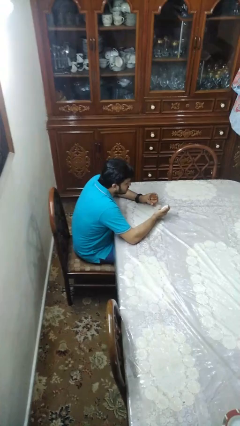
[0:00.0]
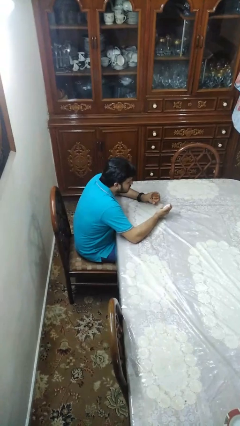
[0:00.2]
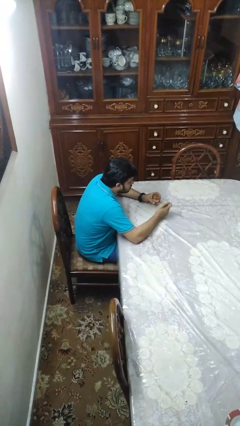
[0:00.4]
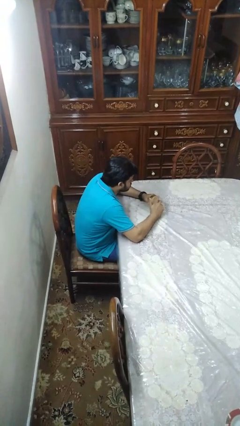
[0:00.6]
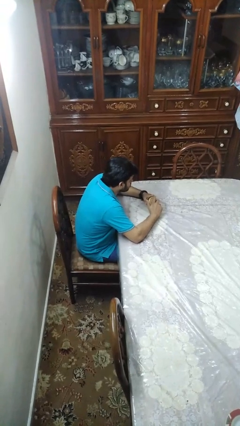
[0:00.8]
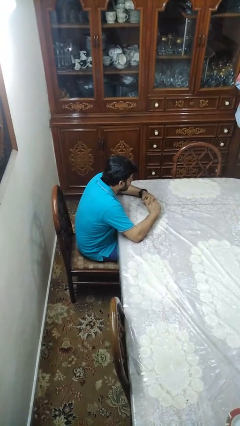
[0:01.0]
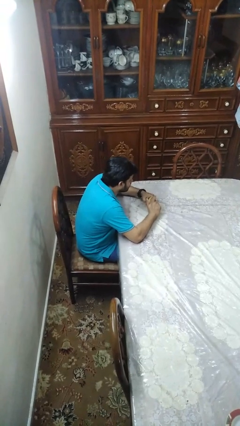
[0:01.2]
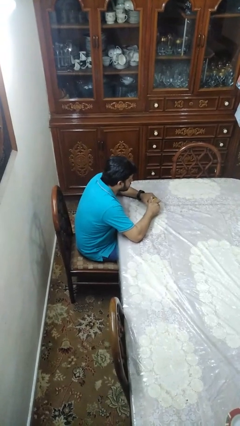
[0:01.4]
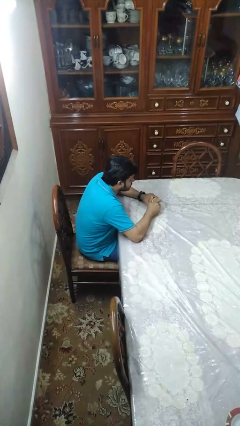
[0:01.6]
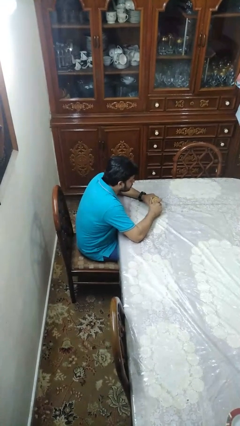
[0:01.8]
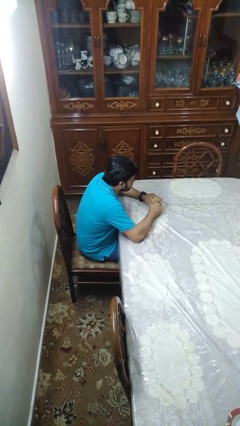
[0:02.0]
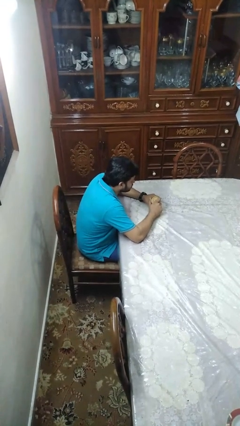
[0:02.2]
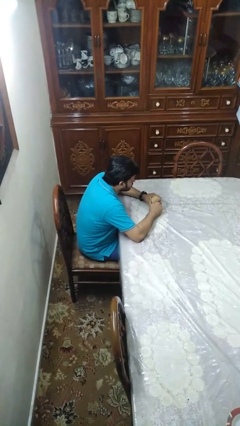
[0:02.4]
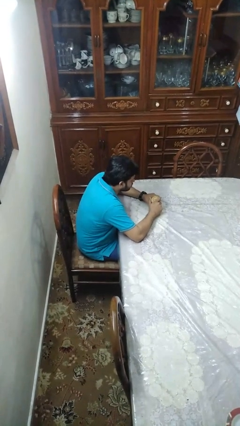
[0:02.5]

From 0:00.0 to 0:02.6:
person closes jar

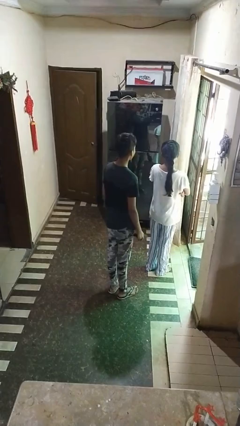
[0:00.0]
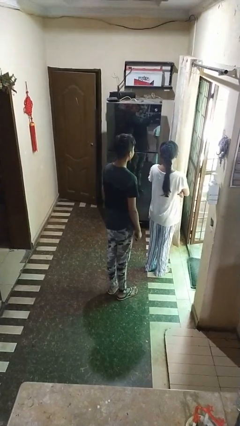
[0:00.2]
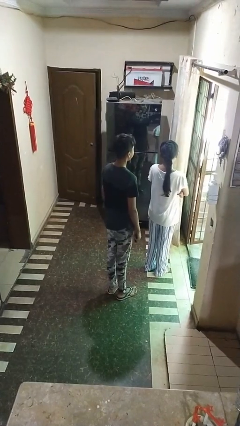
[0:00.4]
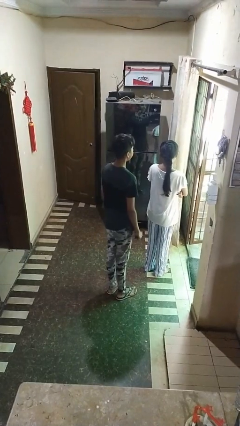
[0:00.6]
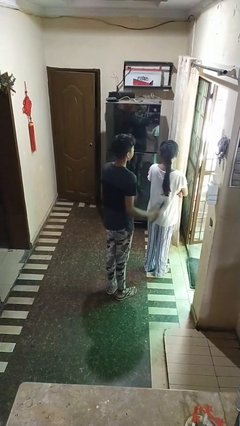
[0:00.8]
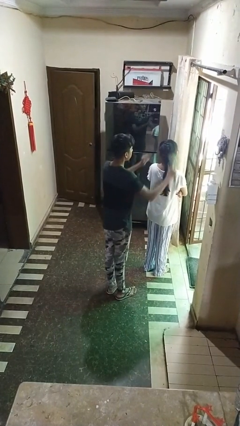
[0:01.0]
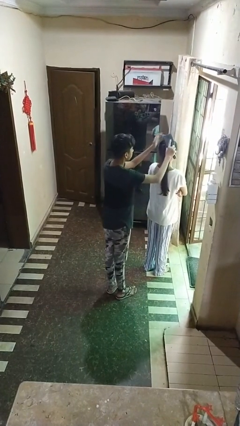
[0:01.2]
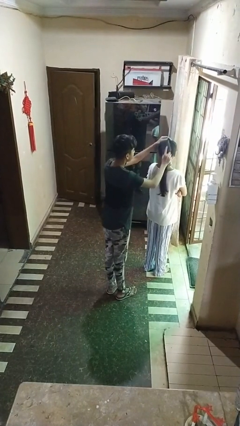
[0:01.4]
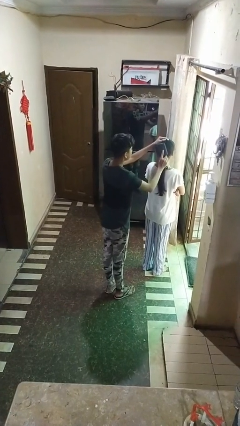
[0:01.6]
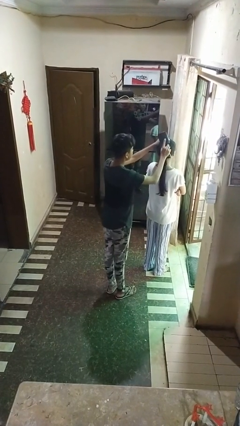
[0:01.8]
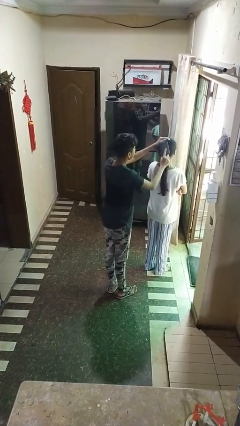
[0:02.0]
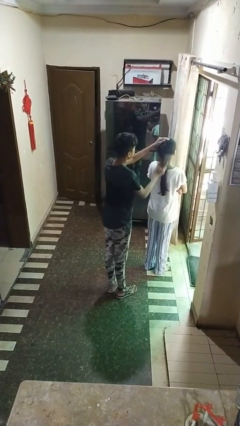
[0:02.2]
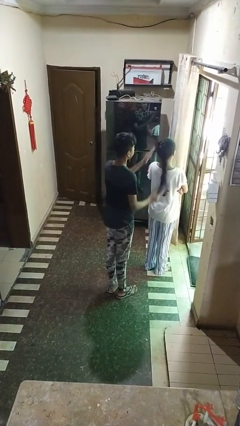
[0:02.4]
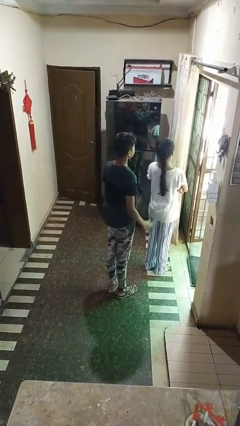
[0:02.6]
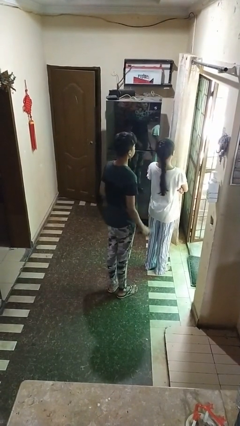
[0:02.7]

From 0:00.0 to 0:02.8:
person brushes hair of person

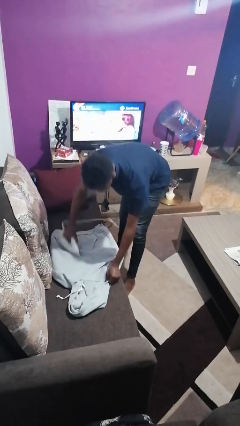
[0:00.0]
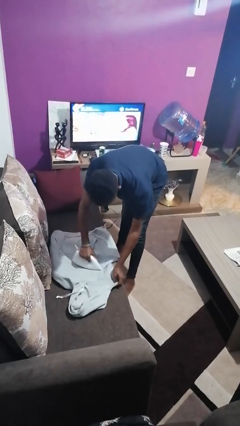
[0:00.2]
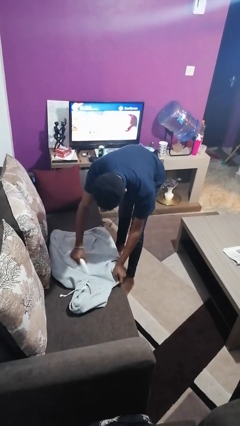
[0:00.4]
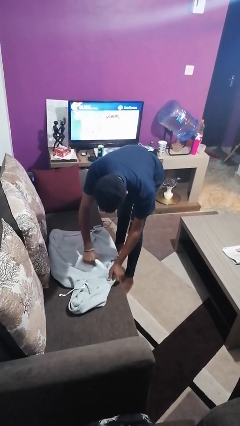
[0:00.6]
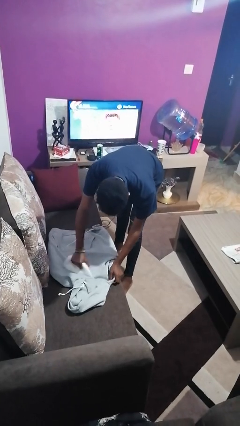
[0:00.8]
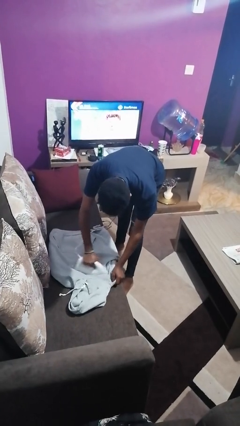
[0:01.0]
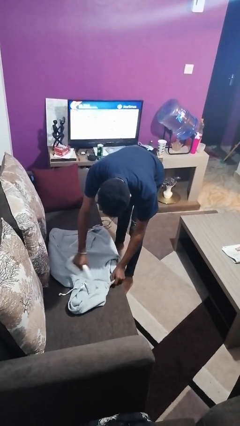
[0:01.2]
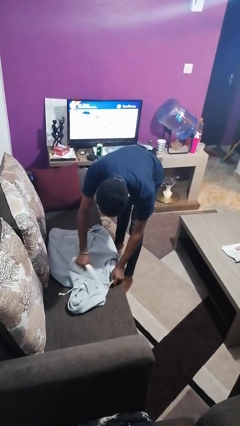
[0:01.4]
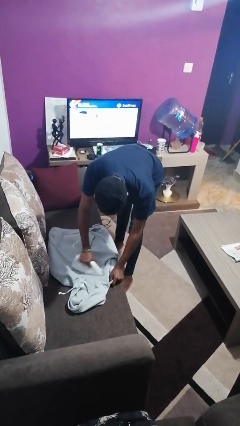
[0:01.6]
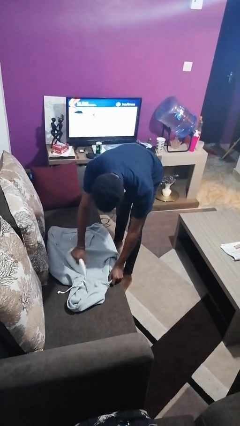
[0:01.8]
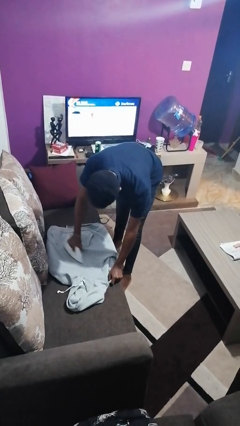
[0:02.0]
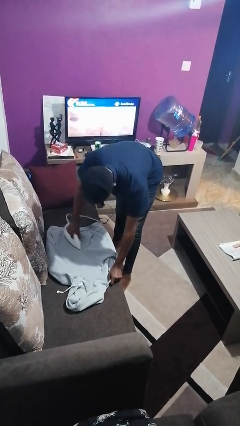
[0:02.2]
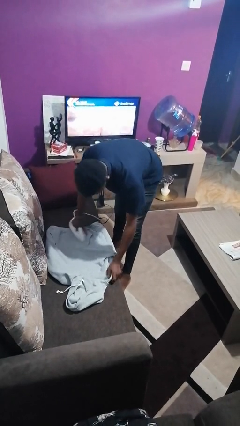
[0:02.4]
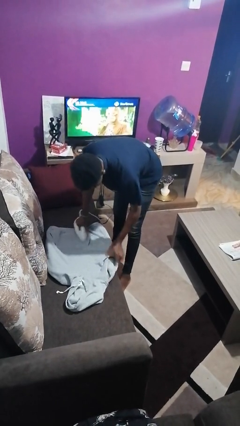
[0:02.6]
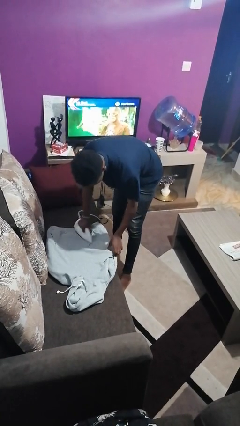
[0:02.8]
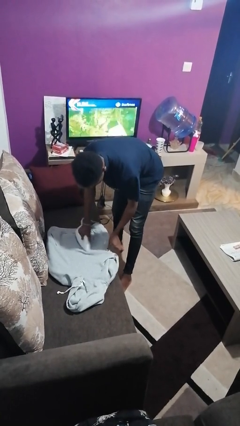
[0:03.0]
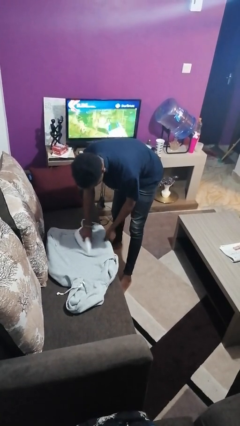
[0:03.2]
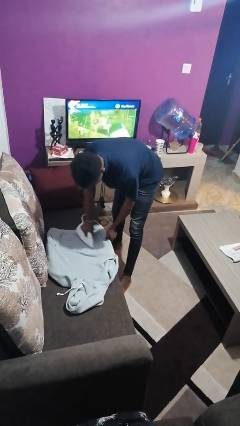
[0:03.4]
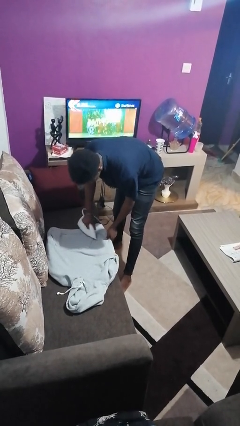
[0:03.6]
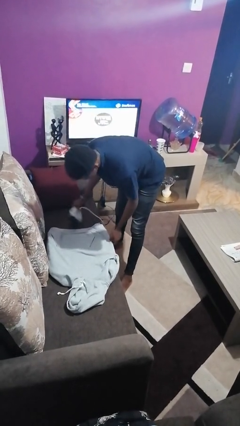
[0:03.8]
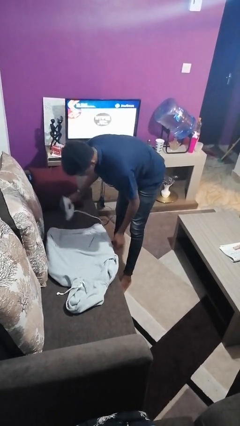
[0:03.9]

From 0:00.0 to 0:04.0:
person irons clothes

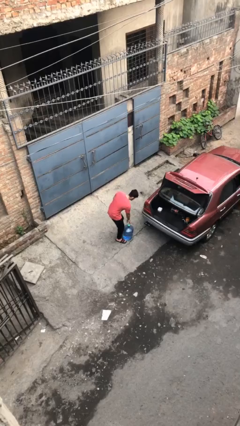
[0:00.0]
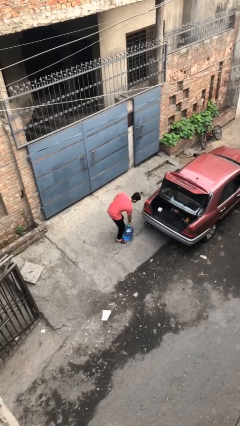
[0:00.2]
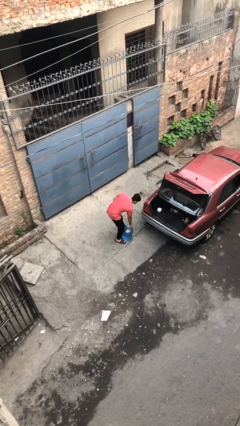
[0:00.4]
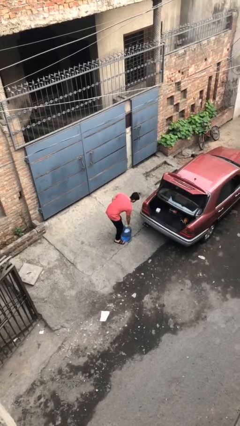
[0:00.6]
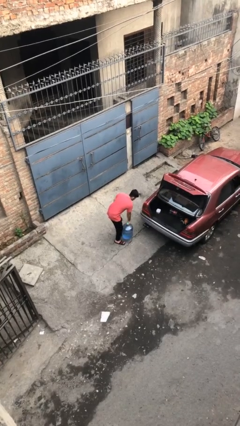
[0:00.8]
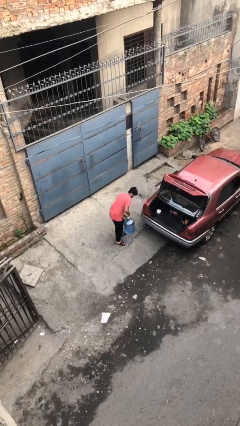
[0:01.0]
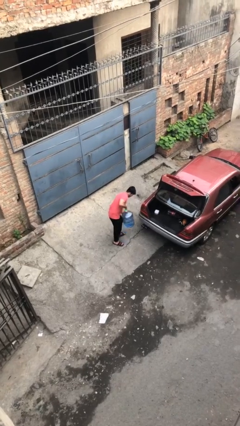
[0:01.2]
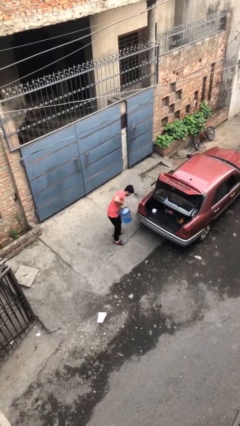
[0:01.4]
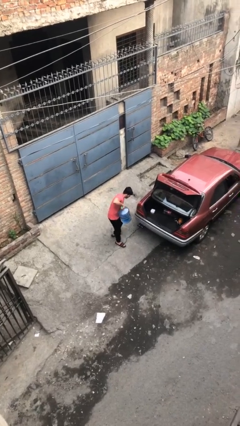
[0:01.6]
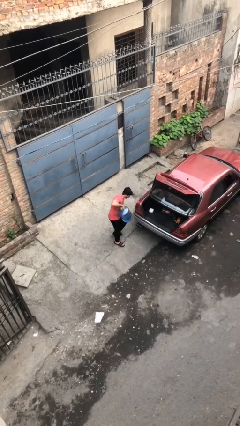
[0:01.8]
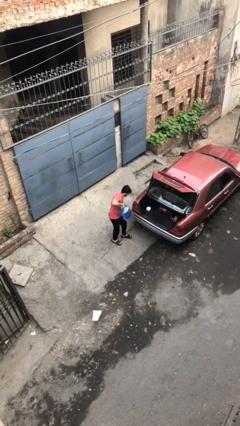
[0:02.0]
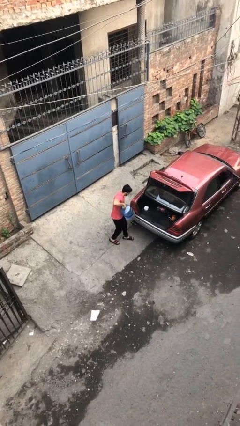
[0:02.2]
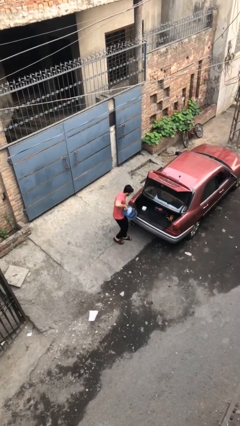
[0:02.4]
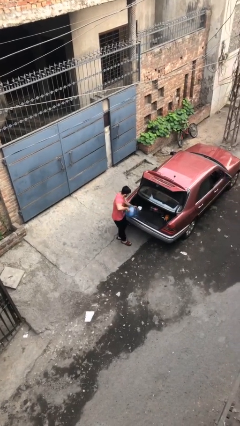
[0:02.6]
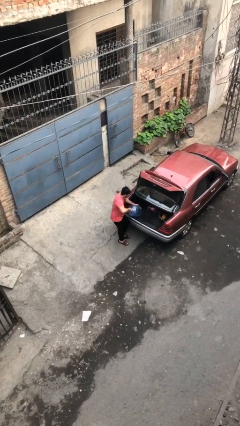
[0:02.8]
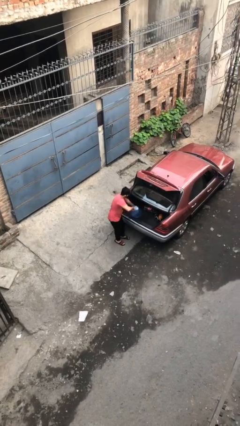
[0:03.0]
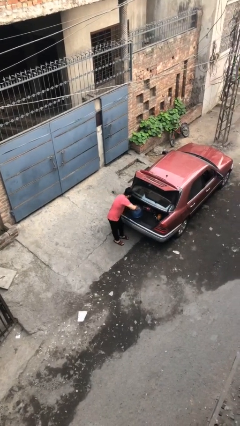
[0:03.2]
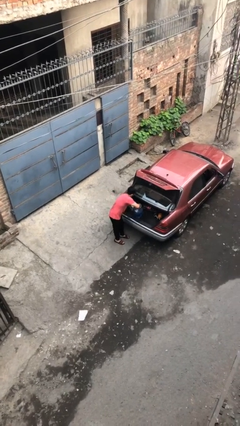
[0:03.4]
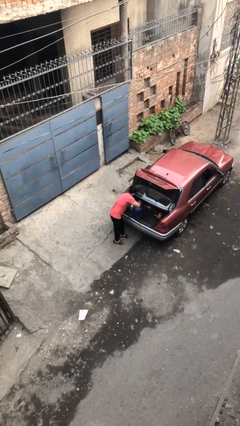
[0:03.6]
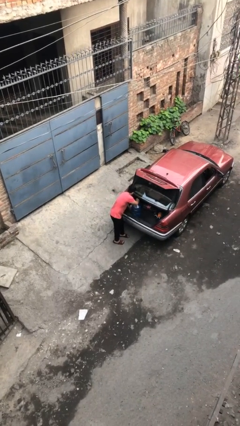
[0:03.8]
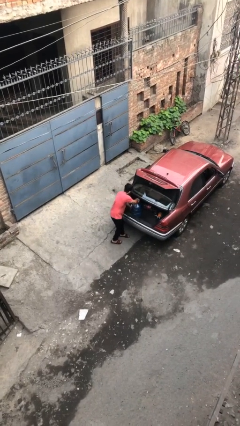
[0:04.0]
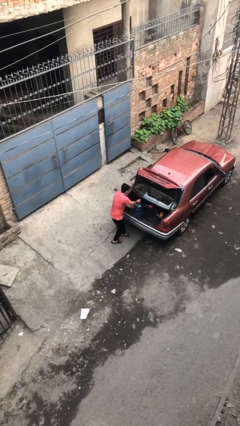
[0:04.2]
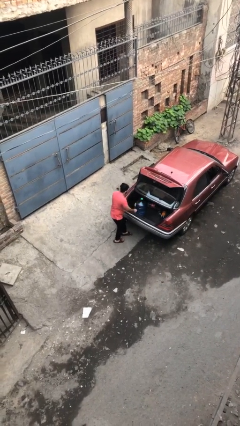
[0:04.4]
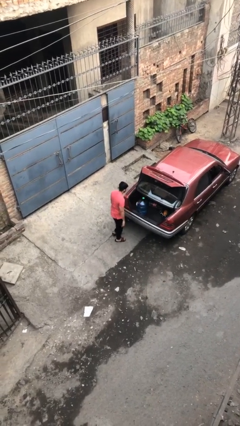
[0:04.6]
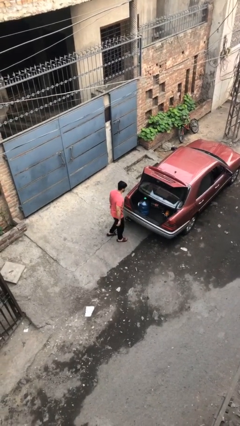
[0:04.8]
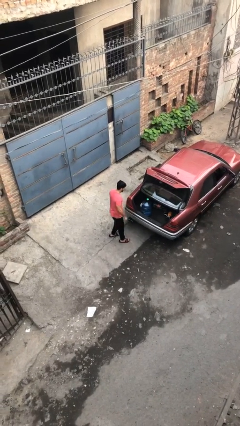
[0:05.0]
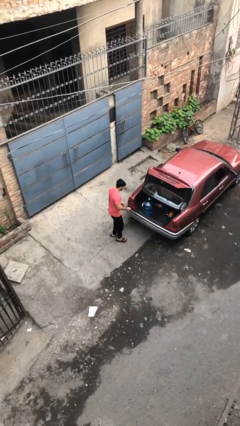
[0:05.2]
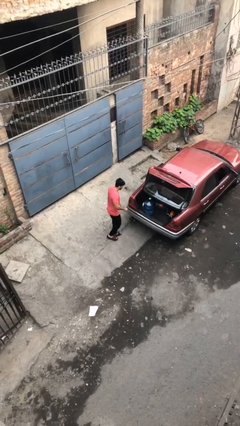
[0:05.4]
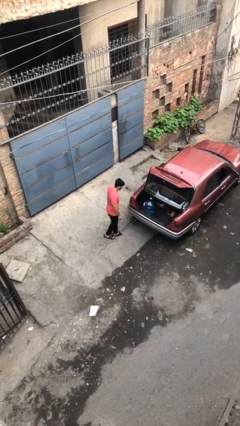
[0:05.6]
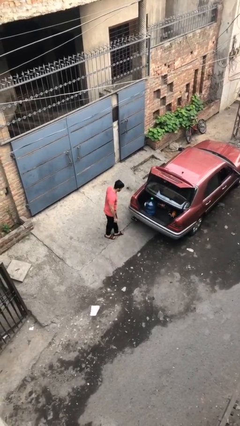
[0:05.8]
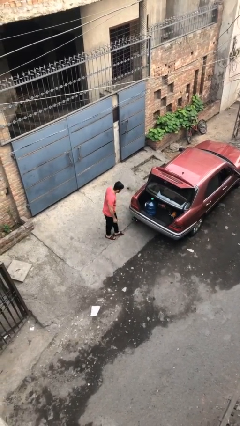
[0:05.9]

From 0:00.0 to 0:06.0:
person loads car

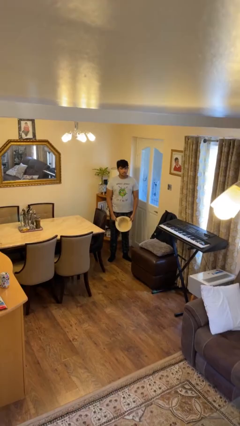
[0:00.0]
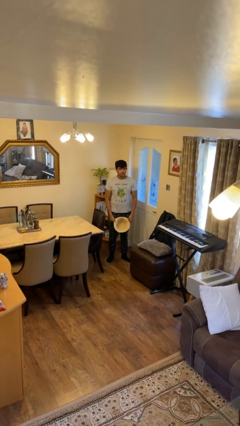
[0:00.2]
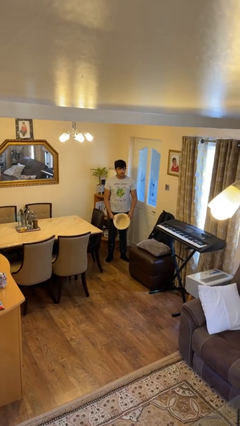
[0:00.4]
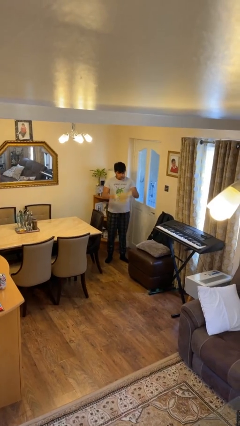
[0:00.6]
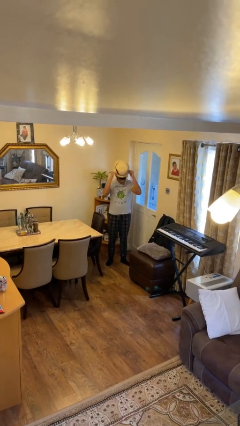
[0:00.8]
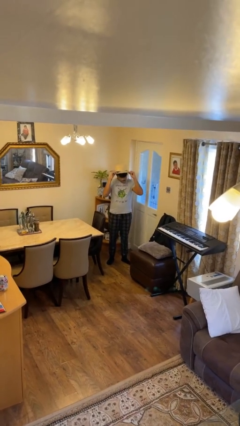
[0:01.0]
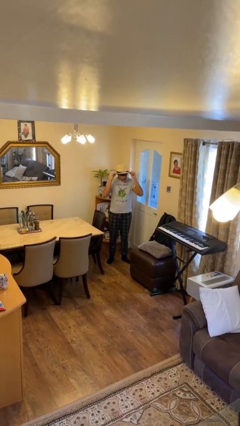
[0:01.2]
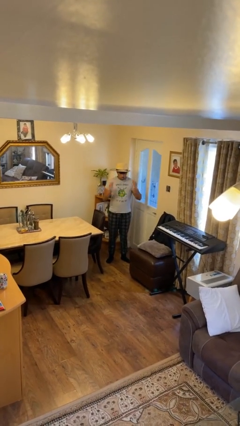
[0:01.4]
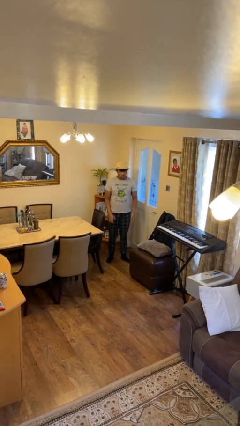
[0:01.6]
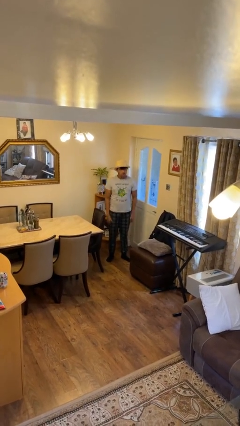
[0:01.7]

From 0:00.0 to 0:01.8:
person puts on hat

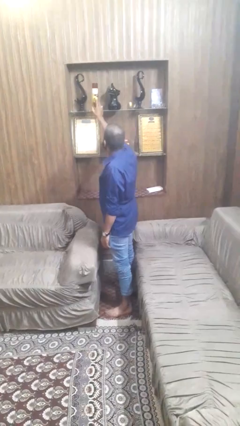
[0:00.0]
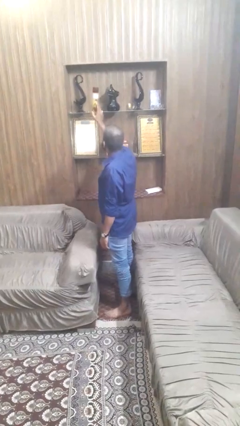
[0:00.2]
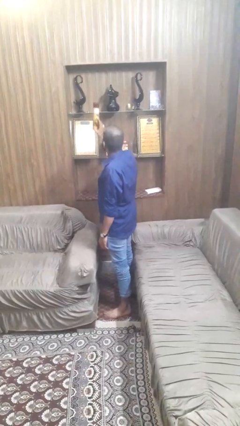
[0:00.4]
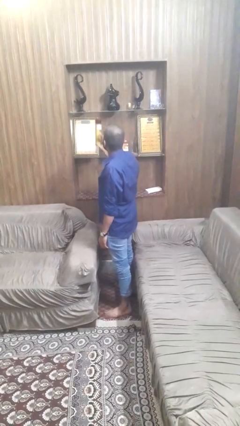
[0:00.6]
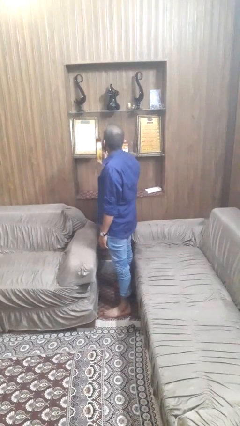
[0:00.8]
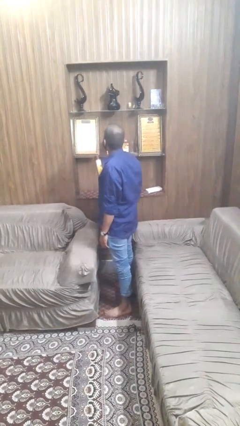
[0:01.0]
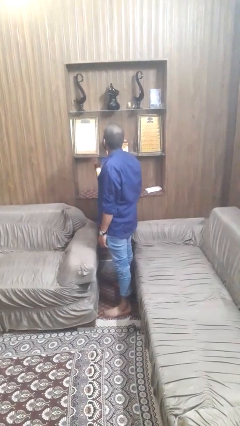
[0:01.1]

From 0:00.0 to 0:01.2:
person picks up object from shelf
